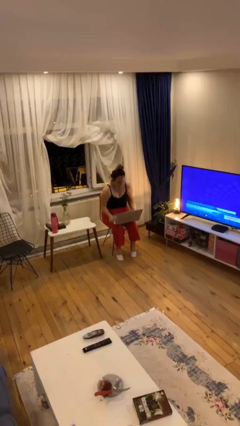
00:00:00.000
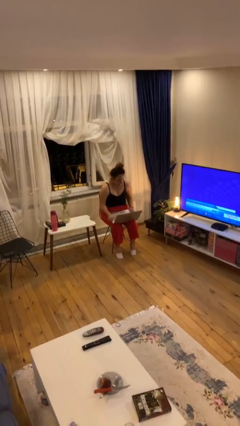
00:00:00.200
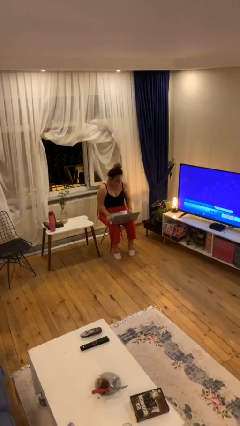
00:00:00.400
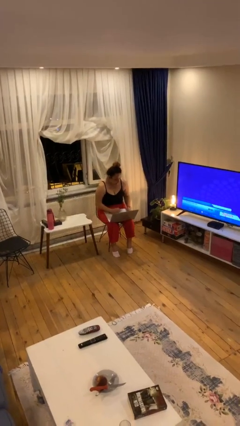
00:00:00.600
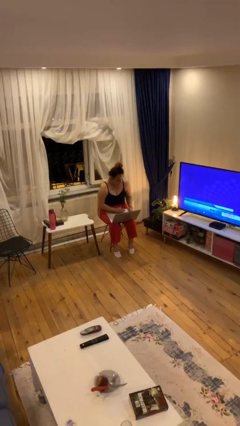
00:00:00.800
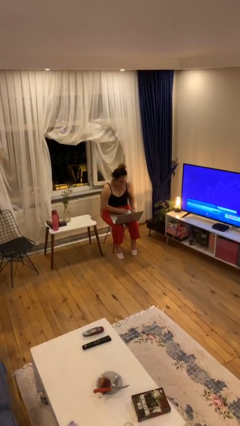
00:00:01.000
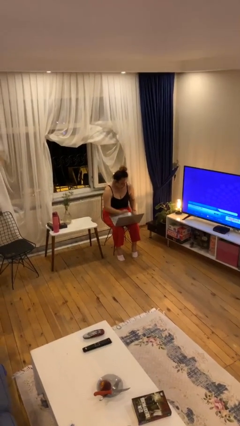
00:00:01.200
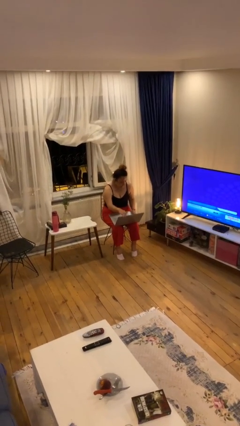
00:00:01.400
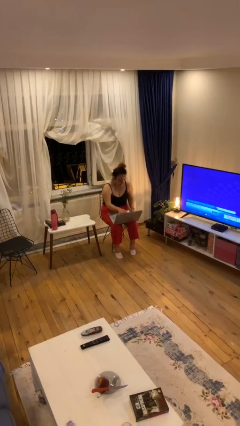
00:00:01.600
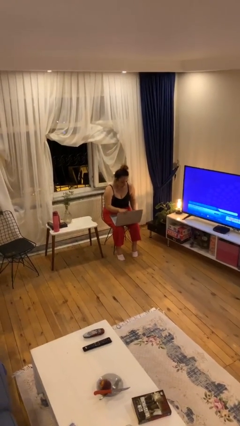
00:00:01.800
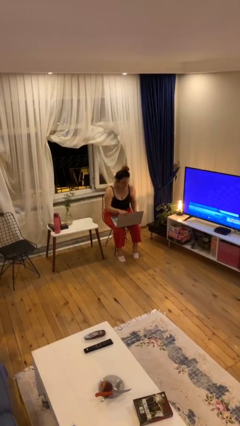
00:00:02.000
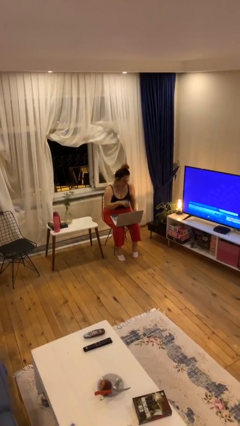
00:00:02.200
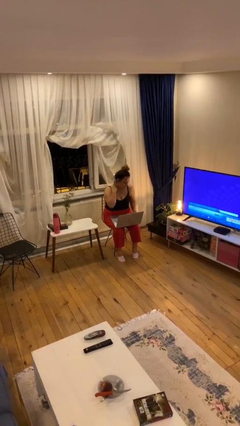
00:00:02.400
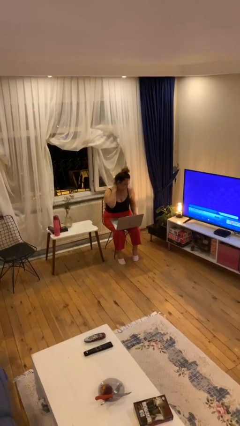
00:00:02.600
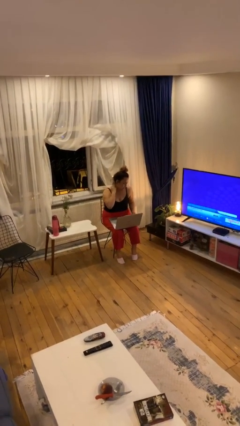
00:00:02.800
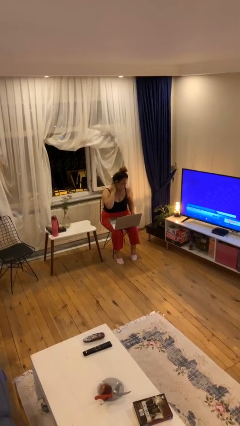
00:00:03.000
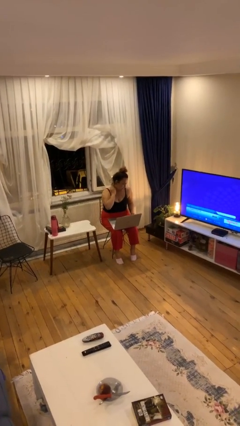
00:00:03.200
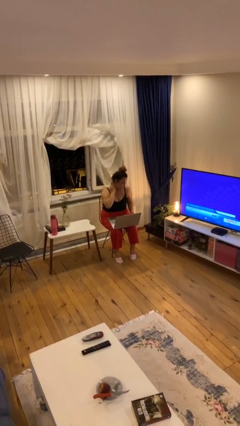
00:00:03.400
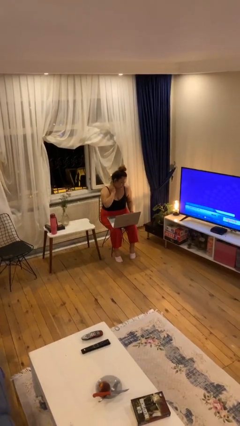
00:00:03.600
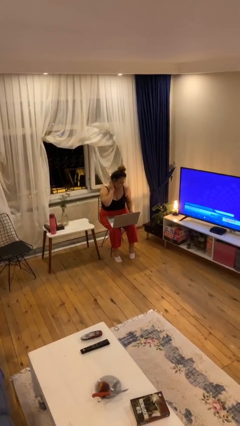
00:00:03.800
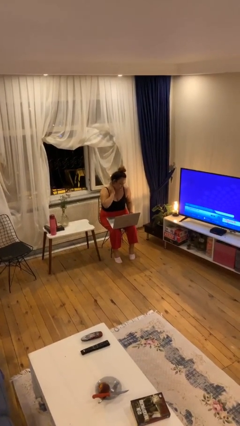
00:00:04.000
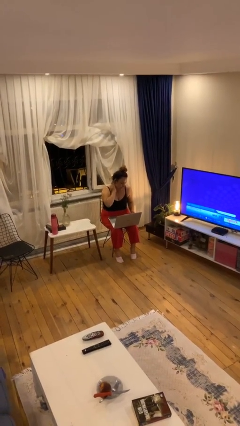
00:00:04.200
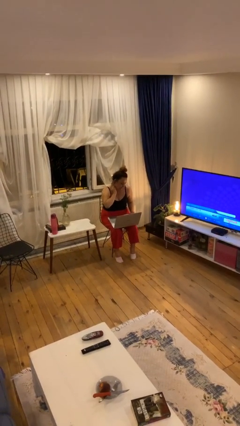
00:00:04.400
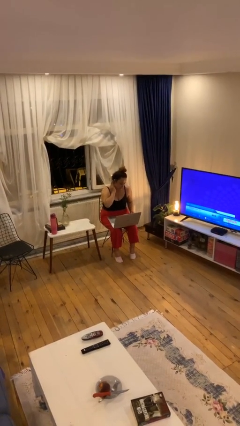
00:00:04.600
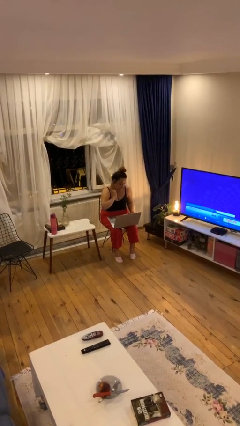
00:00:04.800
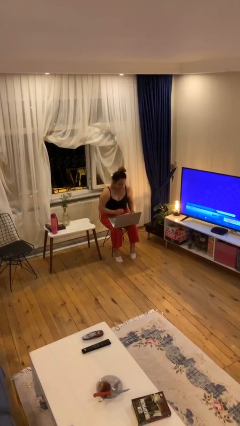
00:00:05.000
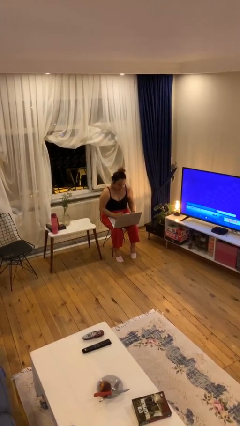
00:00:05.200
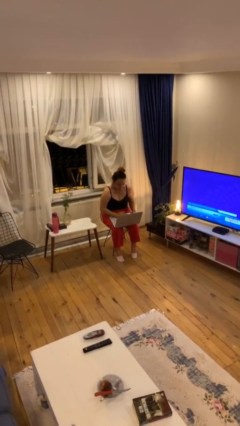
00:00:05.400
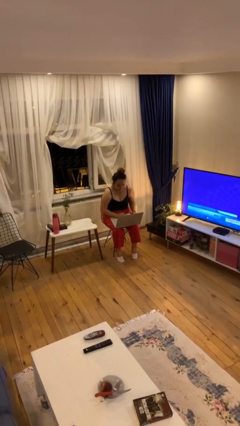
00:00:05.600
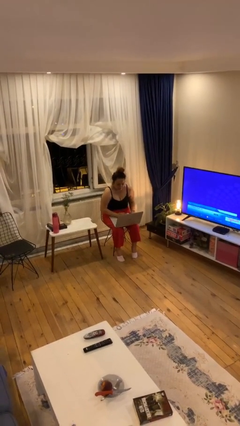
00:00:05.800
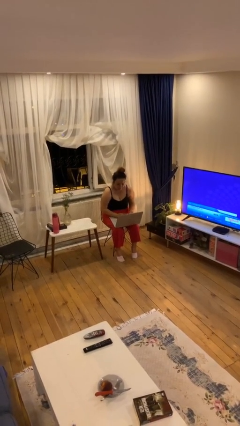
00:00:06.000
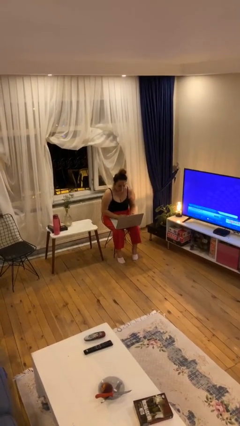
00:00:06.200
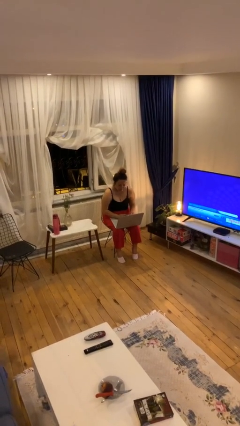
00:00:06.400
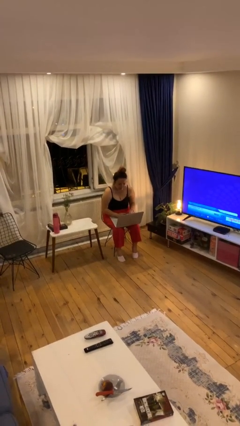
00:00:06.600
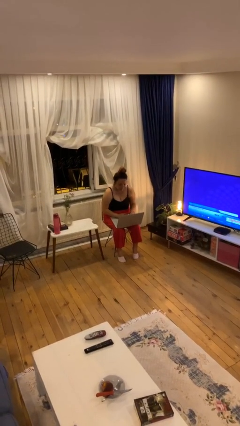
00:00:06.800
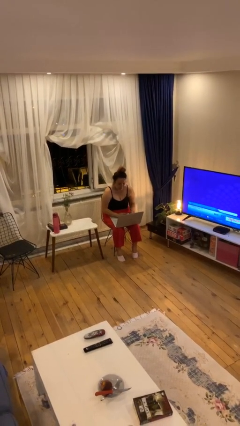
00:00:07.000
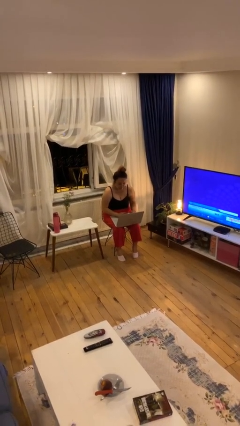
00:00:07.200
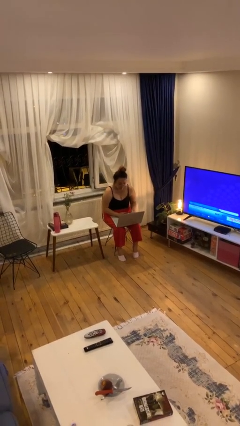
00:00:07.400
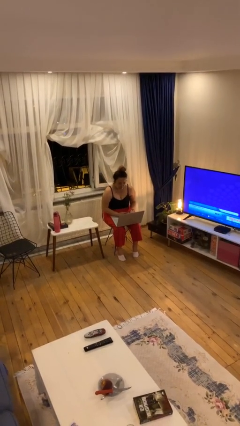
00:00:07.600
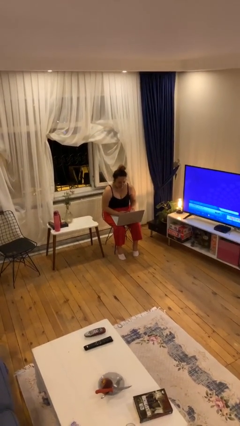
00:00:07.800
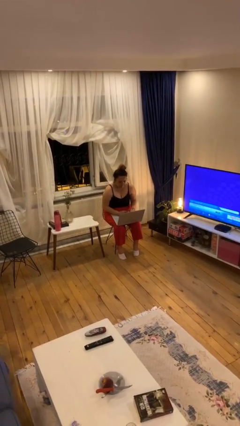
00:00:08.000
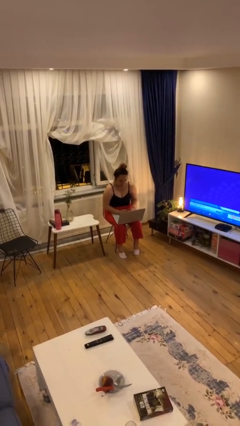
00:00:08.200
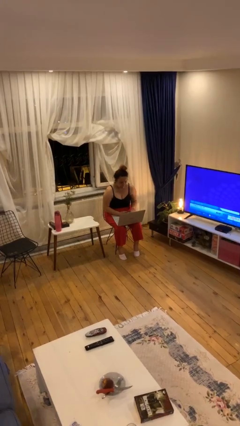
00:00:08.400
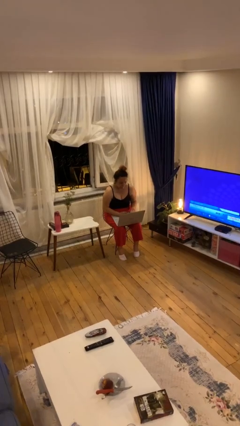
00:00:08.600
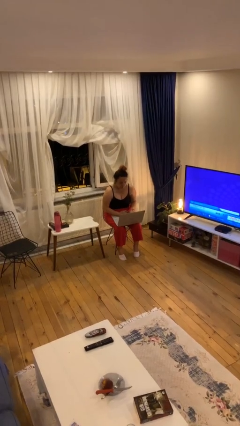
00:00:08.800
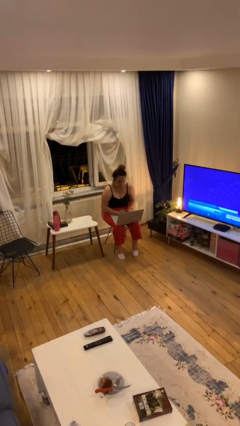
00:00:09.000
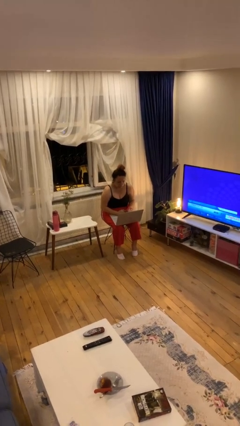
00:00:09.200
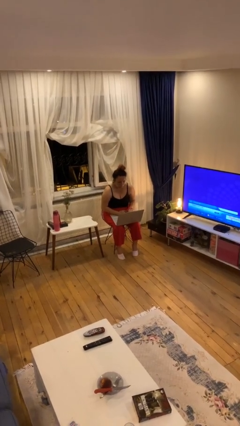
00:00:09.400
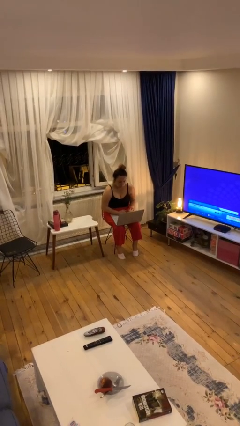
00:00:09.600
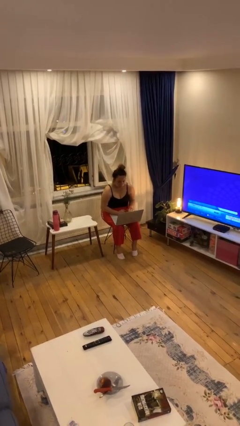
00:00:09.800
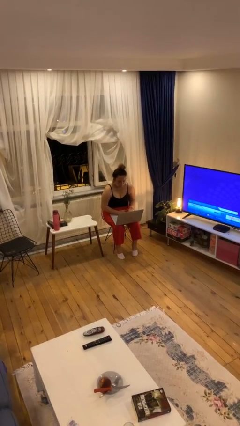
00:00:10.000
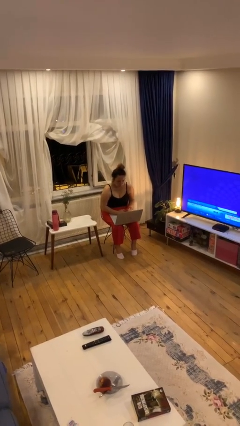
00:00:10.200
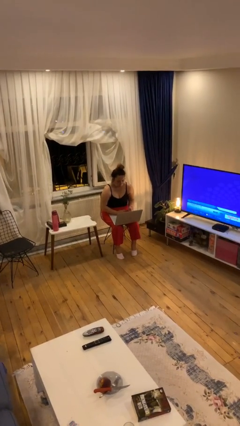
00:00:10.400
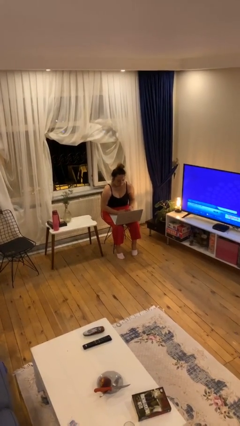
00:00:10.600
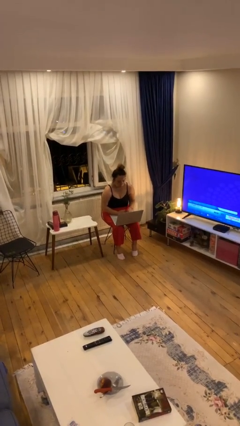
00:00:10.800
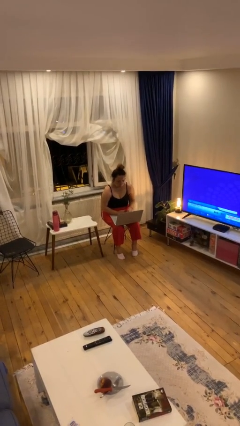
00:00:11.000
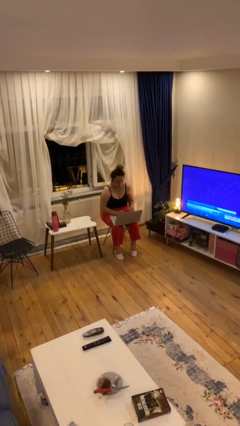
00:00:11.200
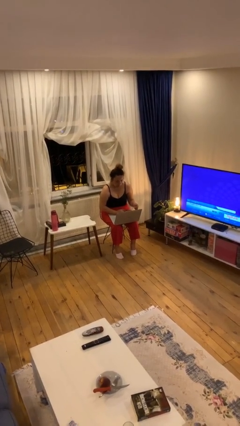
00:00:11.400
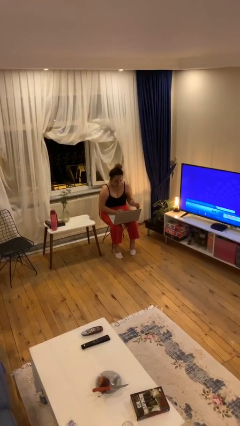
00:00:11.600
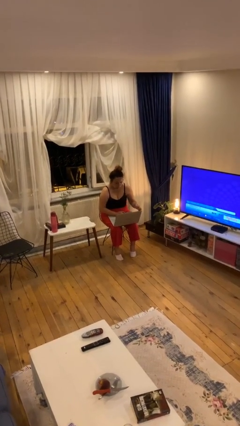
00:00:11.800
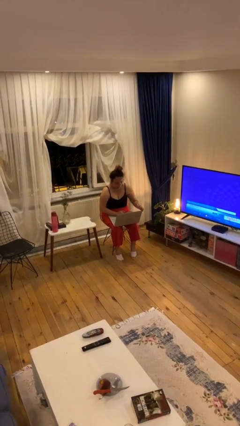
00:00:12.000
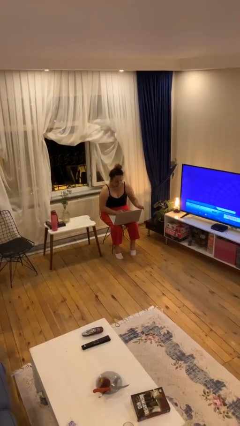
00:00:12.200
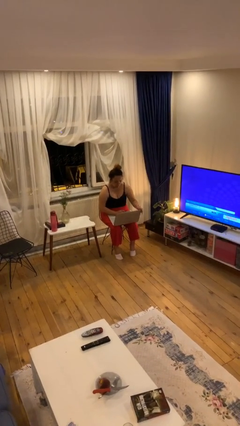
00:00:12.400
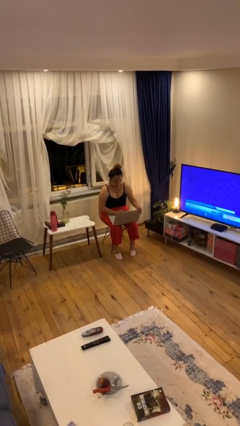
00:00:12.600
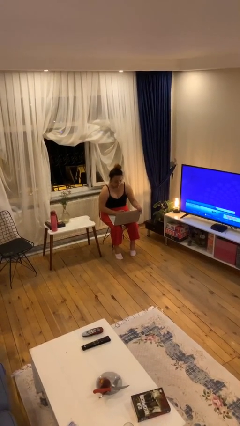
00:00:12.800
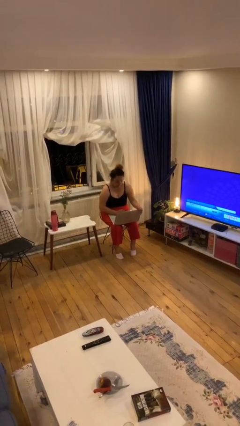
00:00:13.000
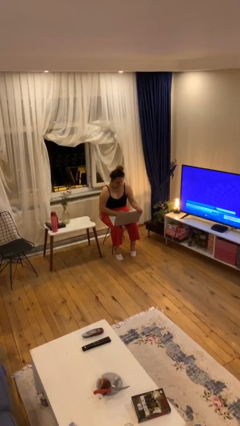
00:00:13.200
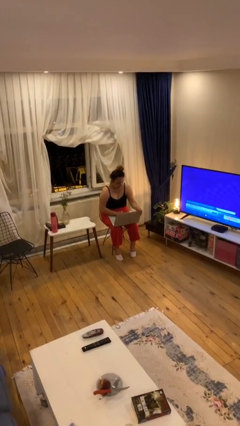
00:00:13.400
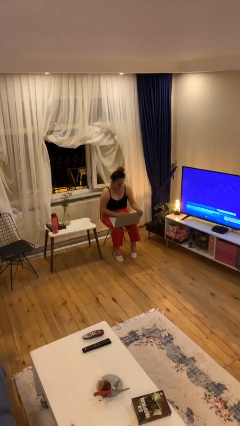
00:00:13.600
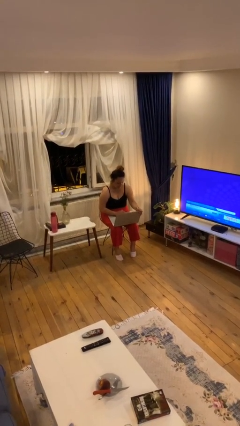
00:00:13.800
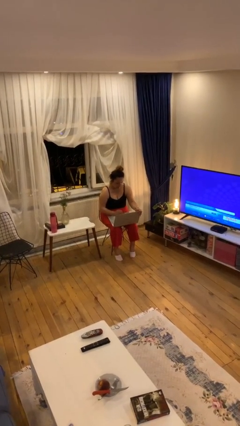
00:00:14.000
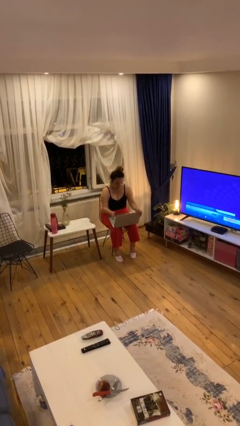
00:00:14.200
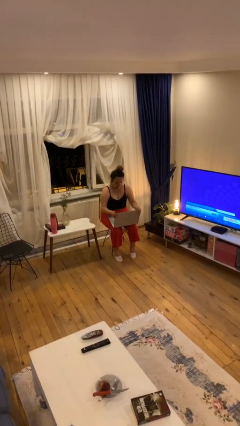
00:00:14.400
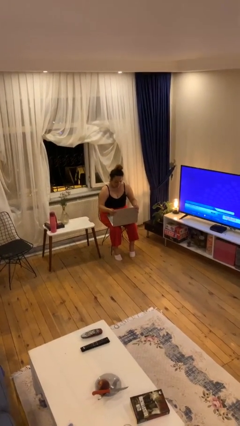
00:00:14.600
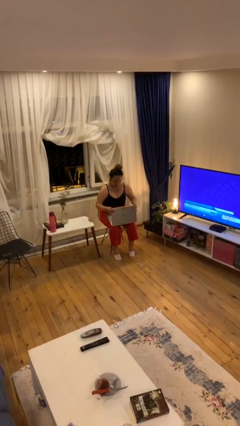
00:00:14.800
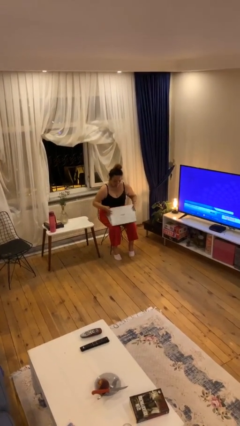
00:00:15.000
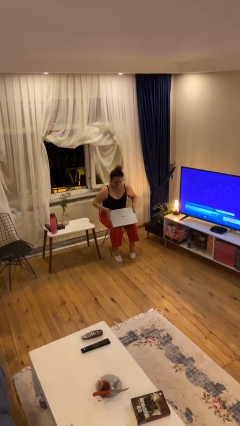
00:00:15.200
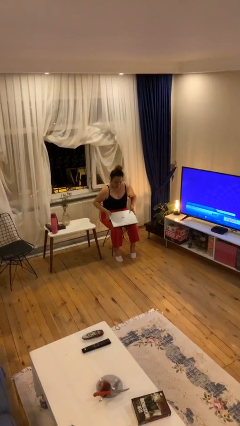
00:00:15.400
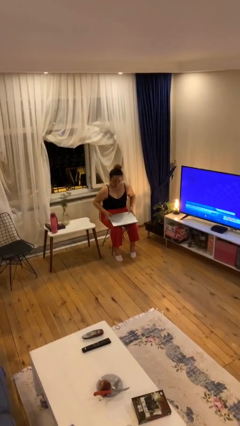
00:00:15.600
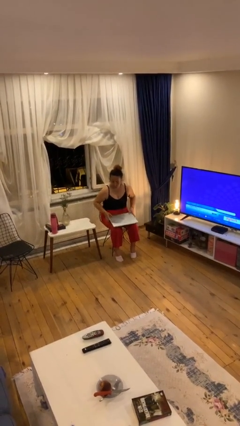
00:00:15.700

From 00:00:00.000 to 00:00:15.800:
person interacts with laptop

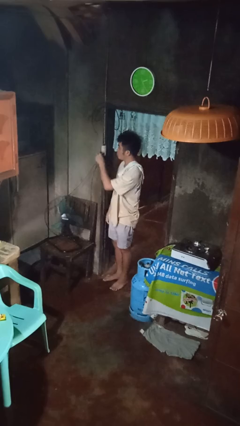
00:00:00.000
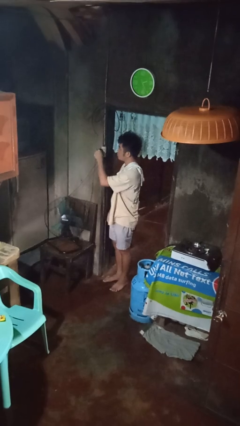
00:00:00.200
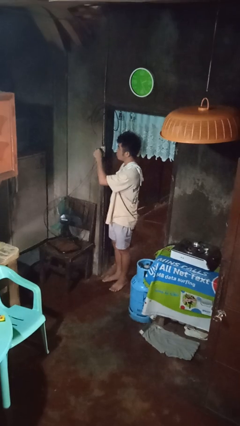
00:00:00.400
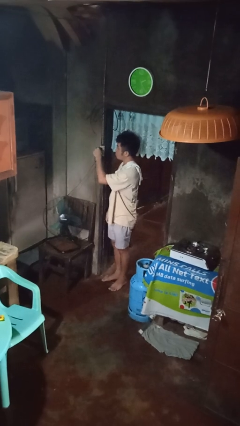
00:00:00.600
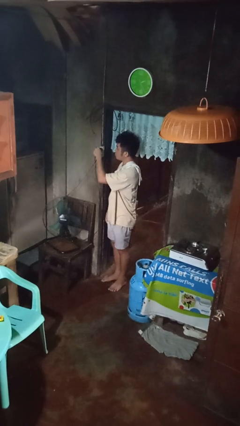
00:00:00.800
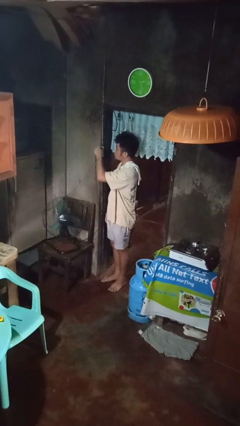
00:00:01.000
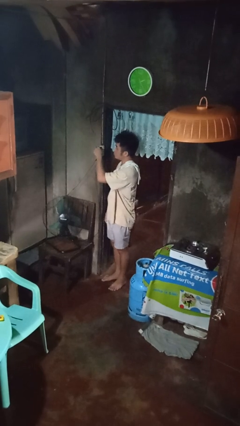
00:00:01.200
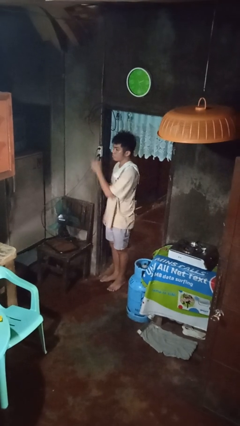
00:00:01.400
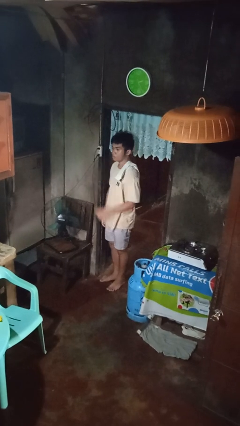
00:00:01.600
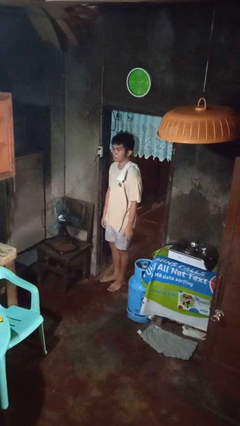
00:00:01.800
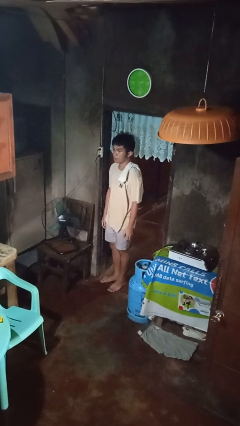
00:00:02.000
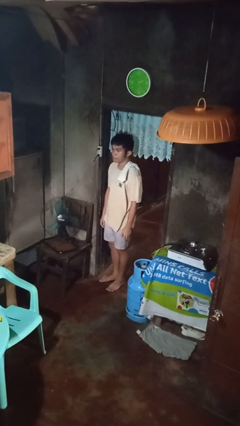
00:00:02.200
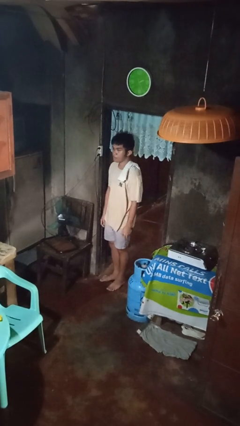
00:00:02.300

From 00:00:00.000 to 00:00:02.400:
person plugs into electrical socket

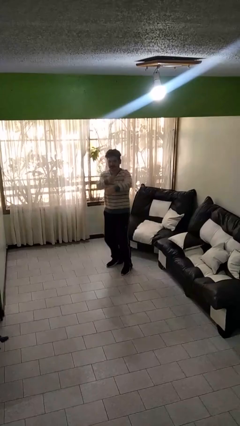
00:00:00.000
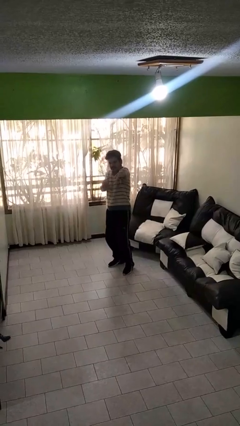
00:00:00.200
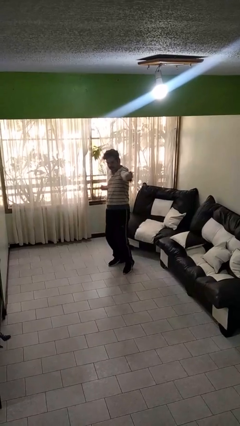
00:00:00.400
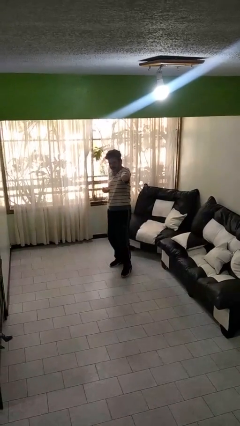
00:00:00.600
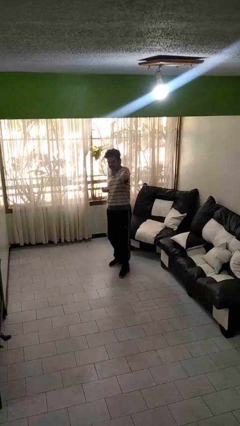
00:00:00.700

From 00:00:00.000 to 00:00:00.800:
person karate chop
